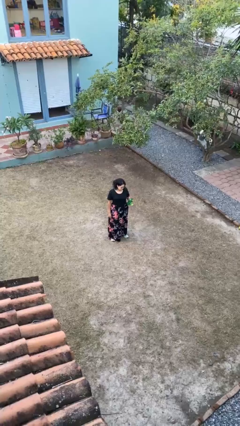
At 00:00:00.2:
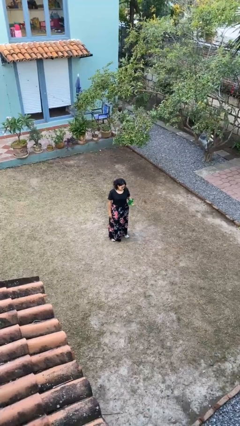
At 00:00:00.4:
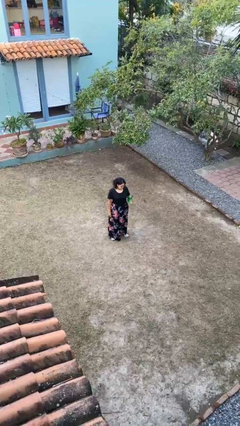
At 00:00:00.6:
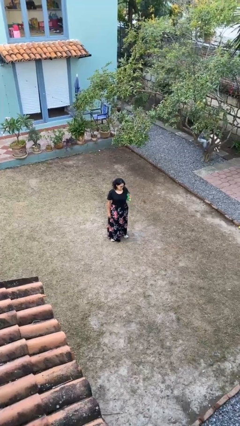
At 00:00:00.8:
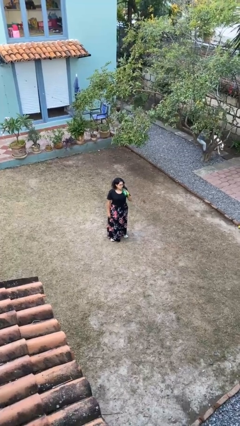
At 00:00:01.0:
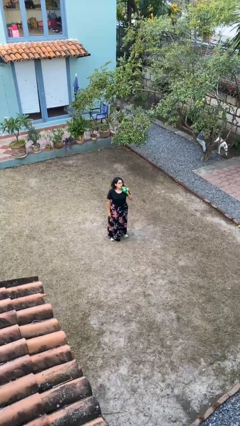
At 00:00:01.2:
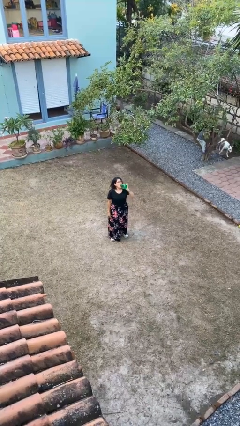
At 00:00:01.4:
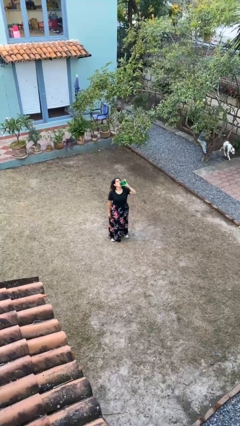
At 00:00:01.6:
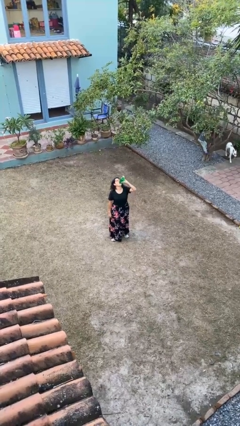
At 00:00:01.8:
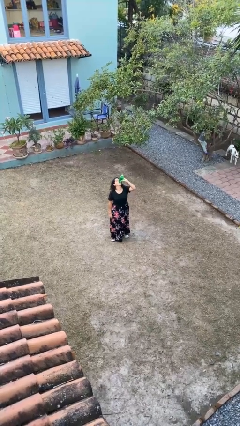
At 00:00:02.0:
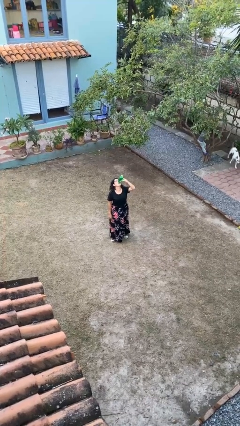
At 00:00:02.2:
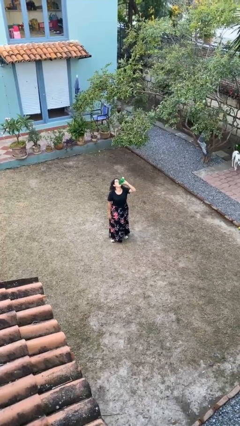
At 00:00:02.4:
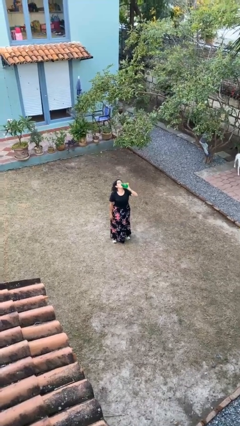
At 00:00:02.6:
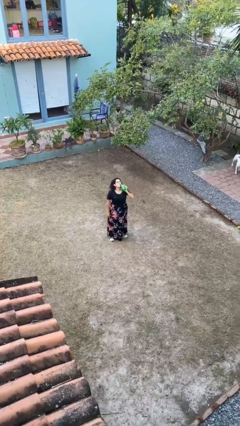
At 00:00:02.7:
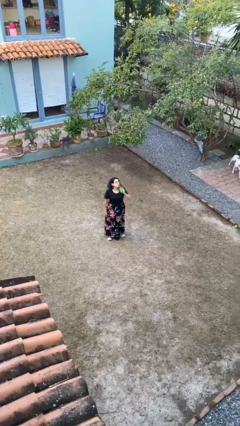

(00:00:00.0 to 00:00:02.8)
person drinks from bottle

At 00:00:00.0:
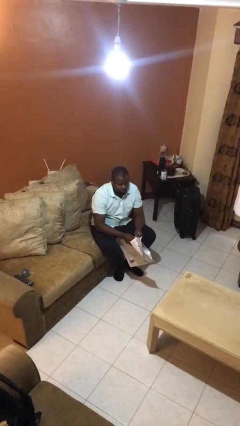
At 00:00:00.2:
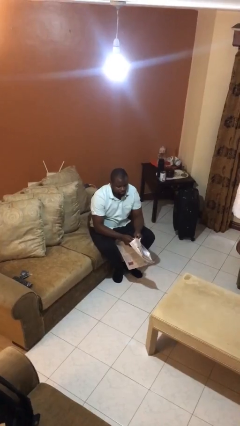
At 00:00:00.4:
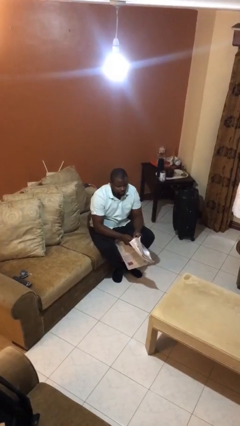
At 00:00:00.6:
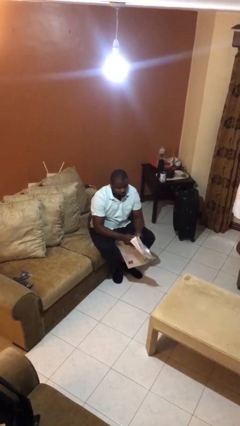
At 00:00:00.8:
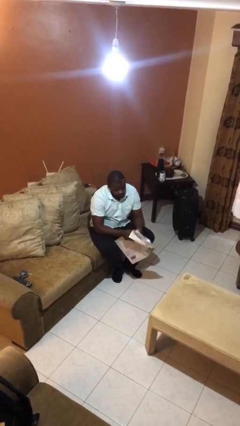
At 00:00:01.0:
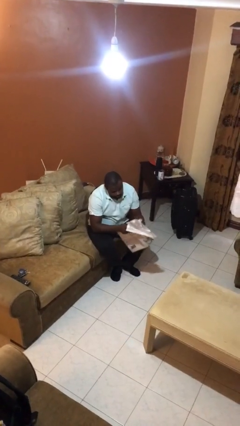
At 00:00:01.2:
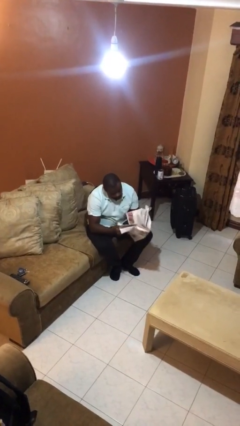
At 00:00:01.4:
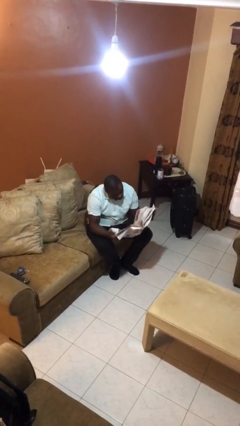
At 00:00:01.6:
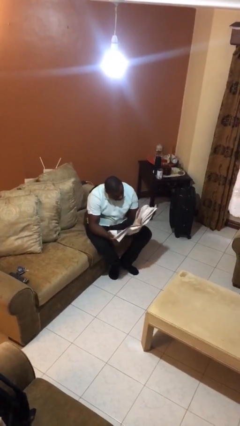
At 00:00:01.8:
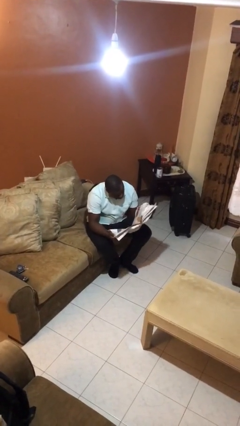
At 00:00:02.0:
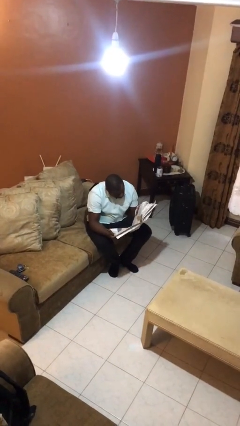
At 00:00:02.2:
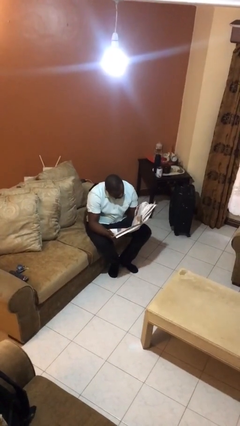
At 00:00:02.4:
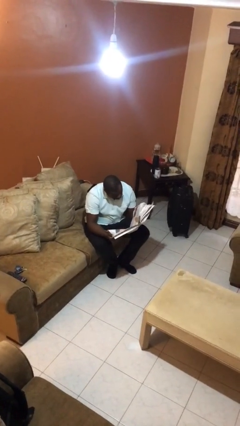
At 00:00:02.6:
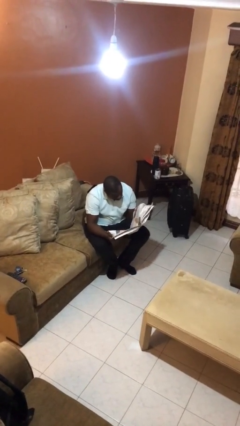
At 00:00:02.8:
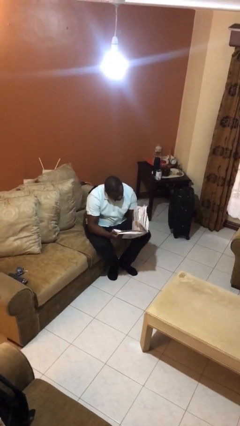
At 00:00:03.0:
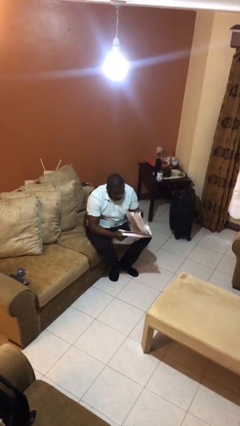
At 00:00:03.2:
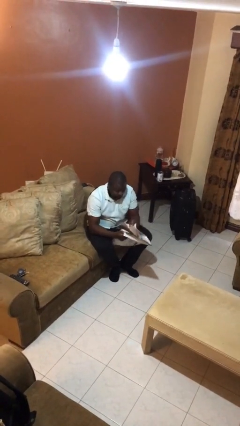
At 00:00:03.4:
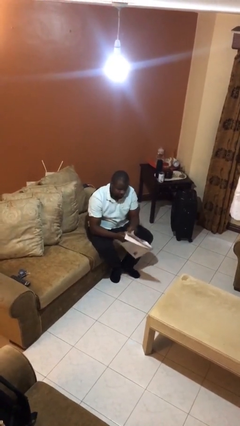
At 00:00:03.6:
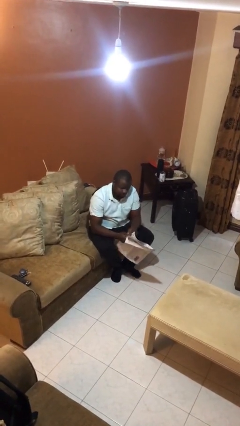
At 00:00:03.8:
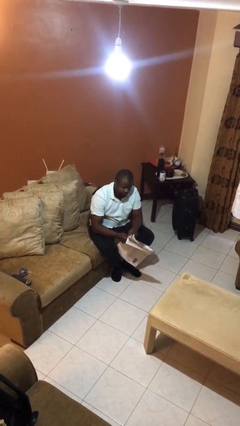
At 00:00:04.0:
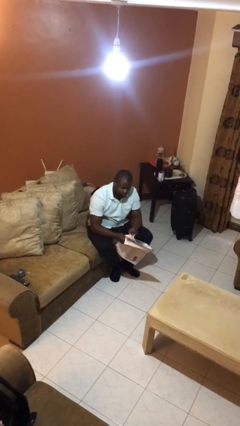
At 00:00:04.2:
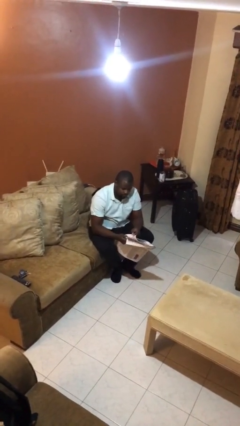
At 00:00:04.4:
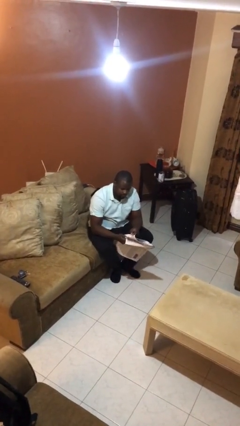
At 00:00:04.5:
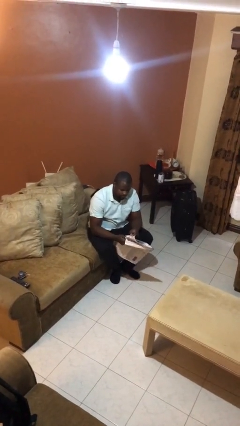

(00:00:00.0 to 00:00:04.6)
person reads newspaper

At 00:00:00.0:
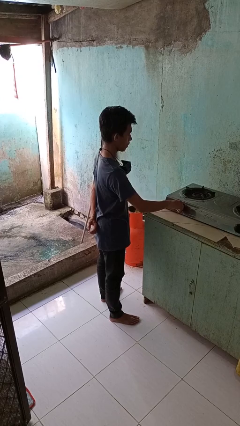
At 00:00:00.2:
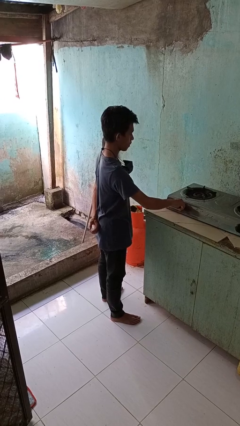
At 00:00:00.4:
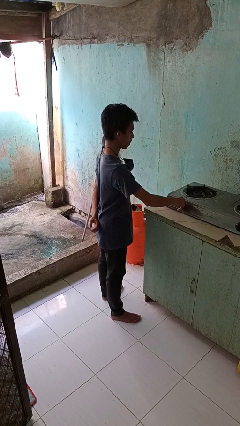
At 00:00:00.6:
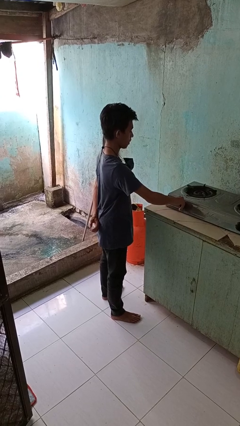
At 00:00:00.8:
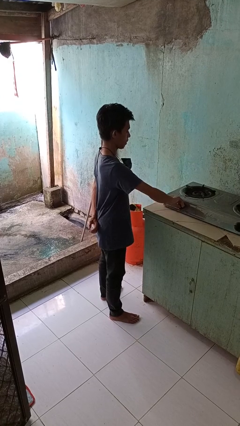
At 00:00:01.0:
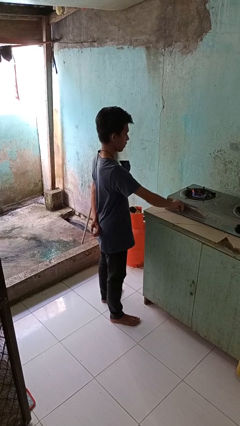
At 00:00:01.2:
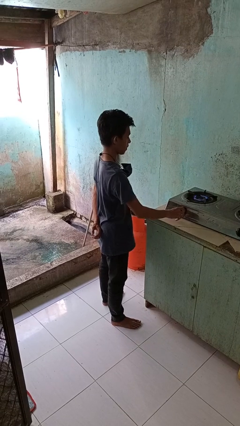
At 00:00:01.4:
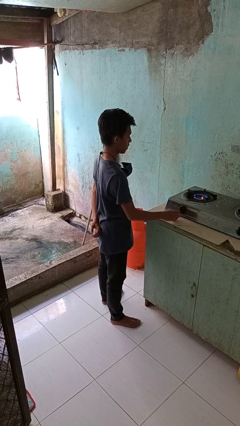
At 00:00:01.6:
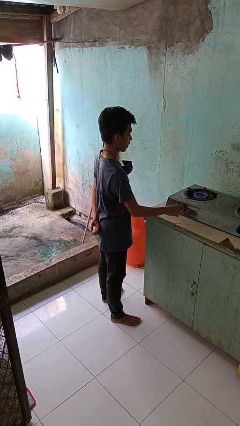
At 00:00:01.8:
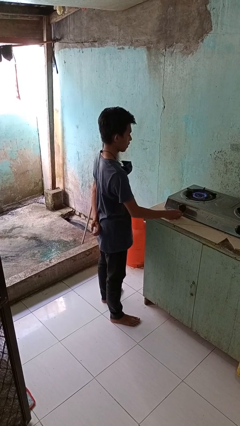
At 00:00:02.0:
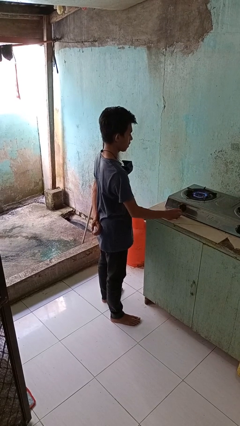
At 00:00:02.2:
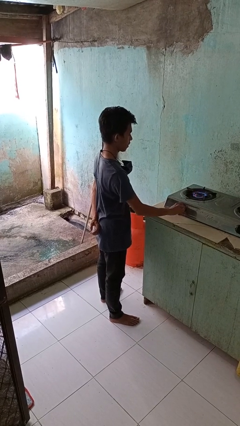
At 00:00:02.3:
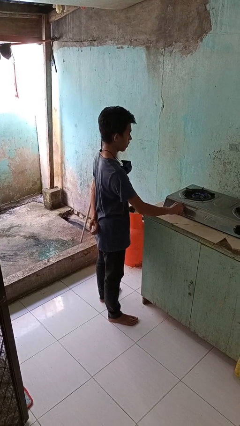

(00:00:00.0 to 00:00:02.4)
person turns on stovetop

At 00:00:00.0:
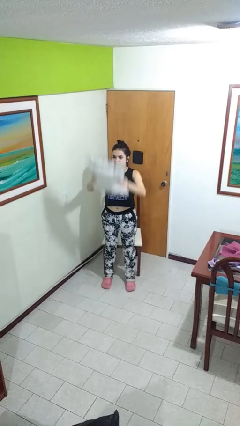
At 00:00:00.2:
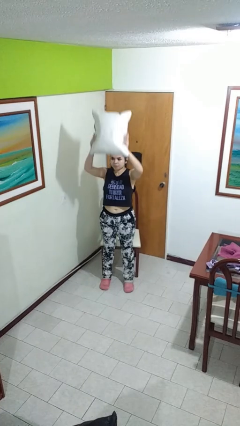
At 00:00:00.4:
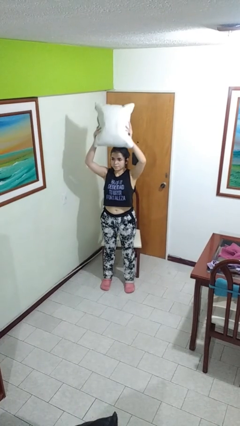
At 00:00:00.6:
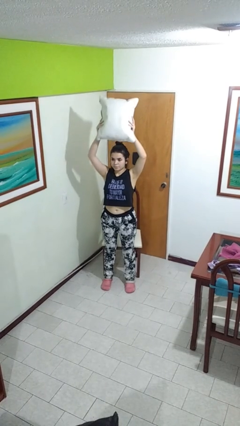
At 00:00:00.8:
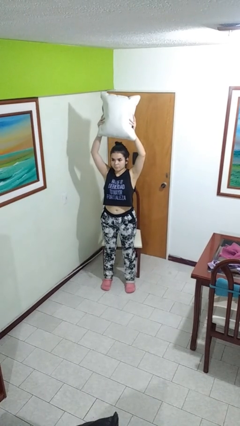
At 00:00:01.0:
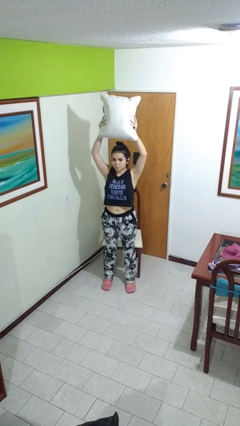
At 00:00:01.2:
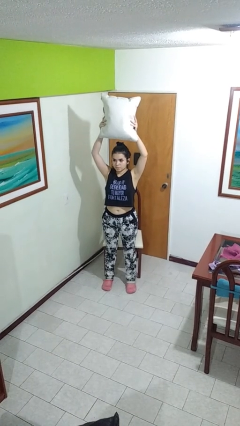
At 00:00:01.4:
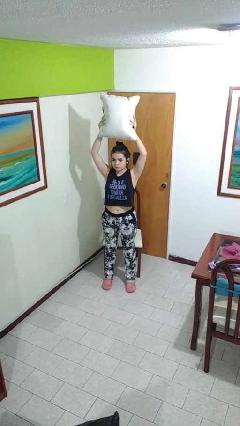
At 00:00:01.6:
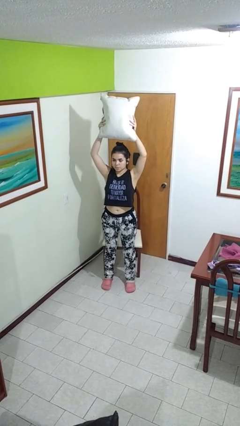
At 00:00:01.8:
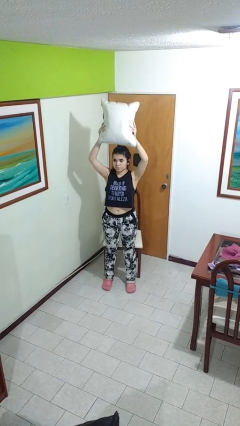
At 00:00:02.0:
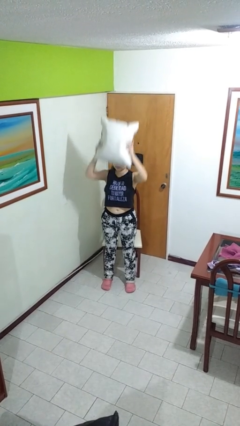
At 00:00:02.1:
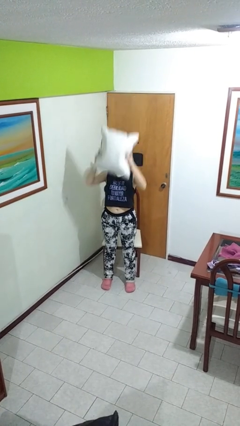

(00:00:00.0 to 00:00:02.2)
person holds object above head

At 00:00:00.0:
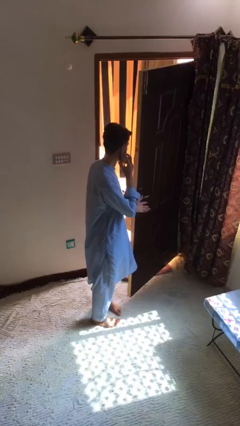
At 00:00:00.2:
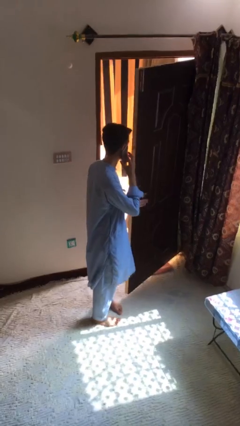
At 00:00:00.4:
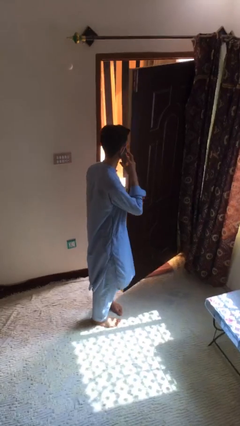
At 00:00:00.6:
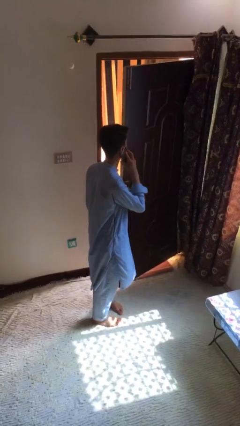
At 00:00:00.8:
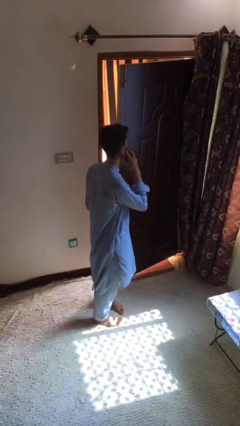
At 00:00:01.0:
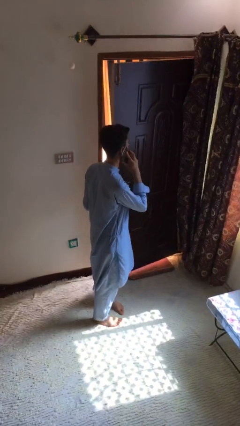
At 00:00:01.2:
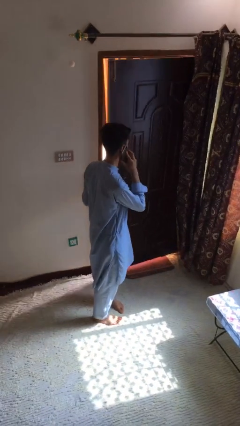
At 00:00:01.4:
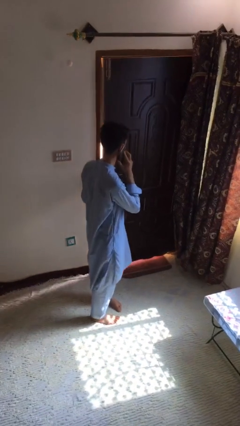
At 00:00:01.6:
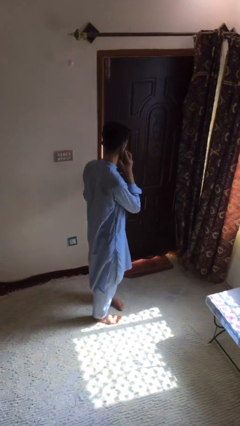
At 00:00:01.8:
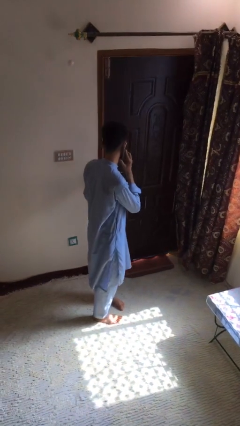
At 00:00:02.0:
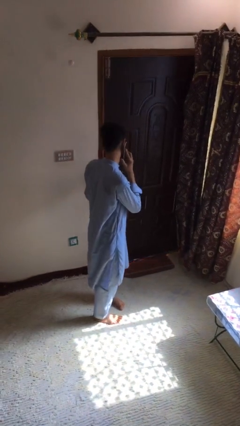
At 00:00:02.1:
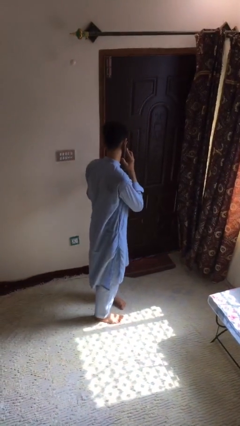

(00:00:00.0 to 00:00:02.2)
person closes facility door

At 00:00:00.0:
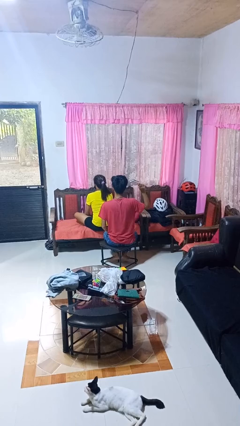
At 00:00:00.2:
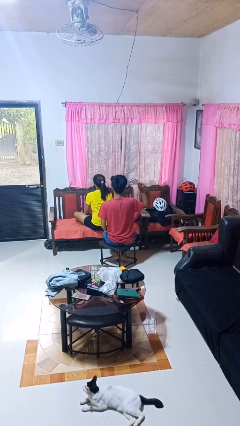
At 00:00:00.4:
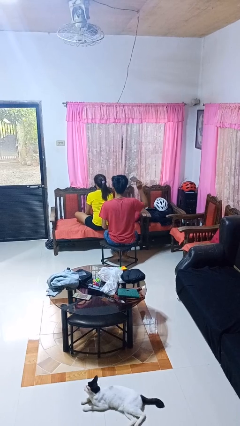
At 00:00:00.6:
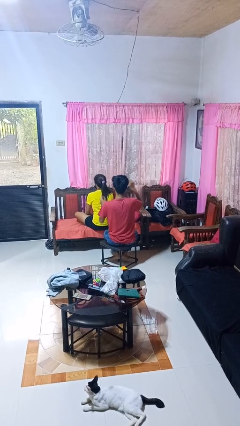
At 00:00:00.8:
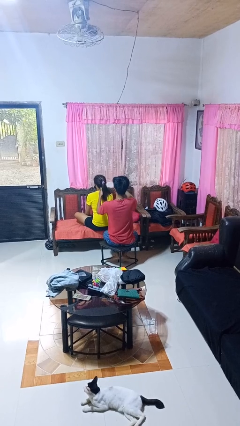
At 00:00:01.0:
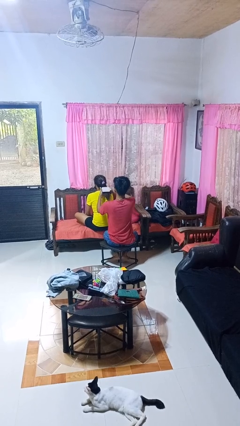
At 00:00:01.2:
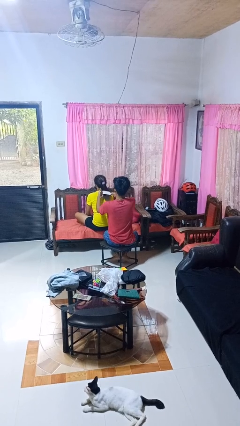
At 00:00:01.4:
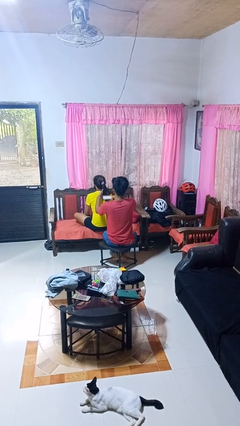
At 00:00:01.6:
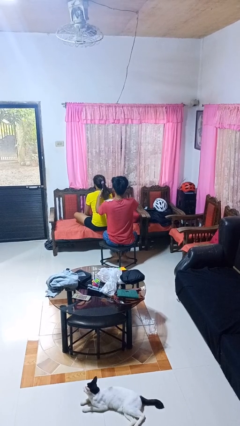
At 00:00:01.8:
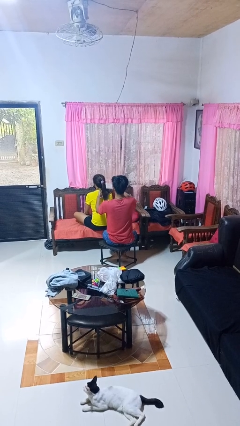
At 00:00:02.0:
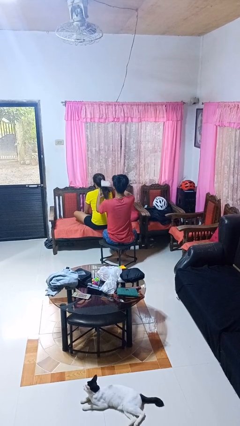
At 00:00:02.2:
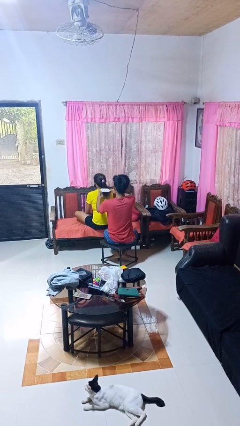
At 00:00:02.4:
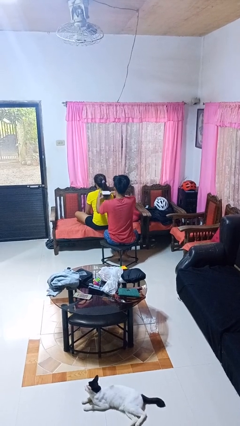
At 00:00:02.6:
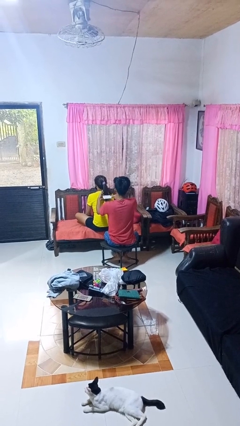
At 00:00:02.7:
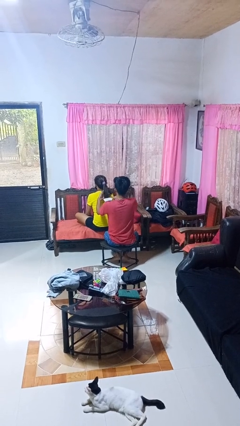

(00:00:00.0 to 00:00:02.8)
person brushes hair of person

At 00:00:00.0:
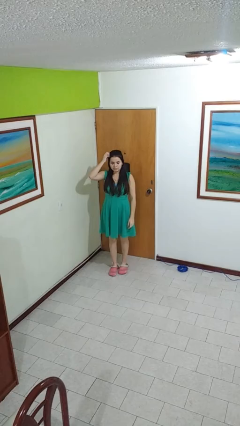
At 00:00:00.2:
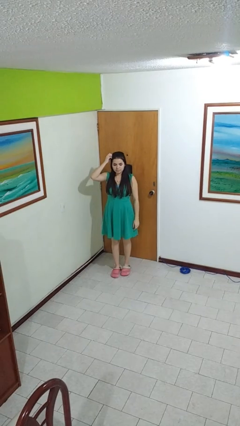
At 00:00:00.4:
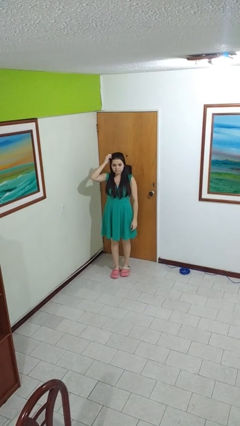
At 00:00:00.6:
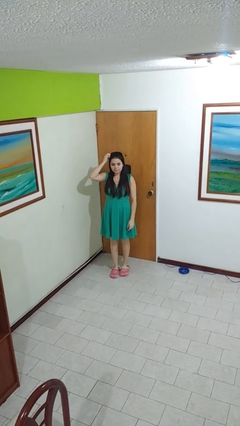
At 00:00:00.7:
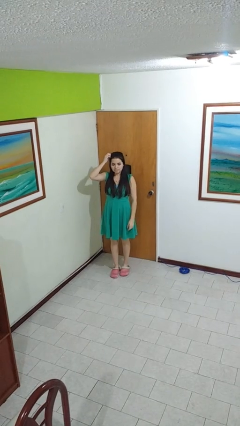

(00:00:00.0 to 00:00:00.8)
person scratches face
